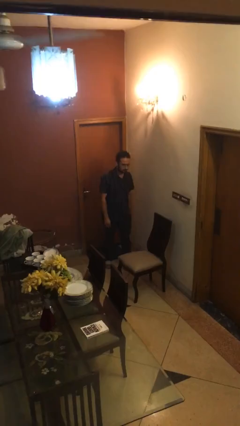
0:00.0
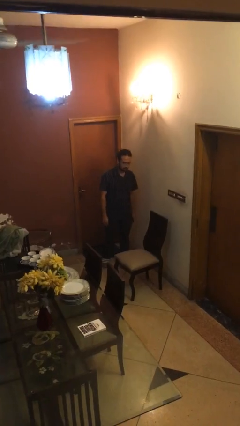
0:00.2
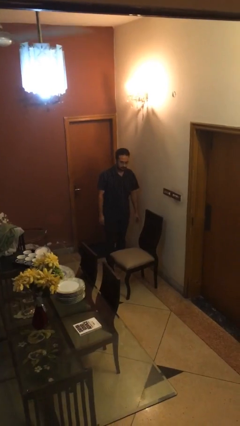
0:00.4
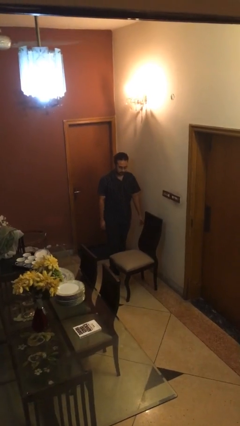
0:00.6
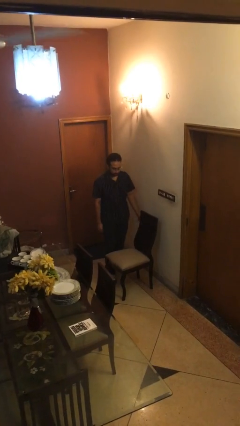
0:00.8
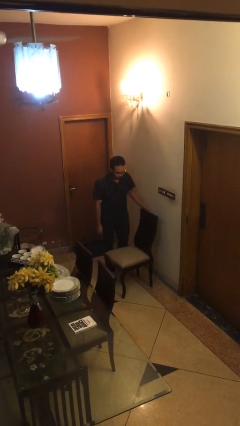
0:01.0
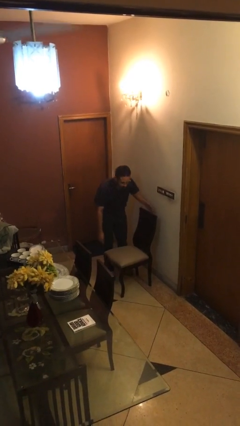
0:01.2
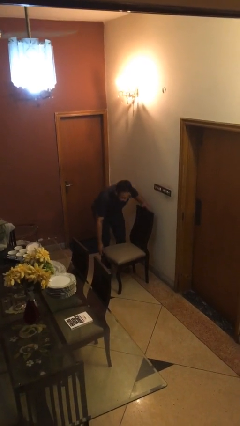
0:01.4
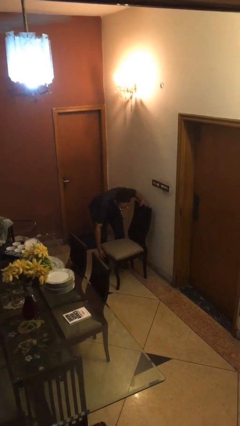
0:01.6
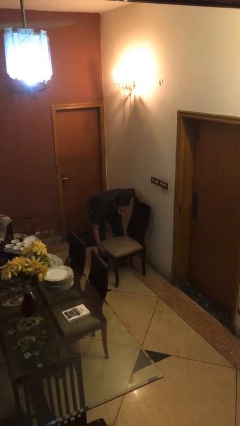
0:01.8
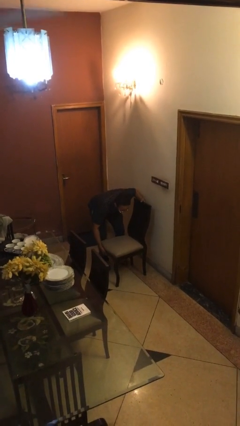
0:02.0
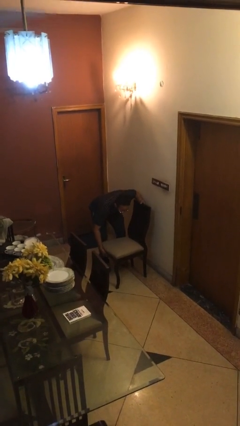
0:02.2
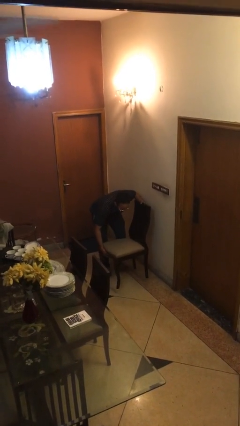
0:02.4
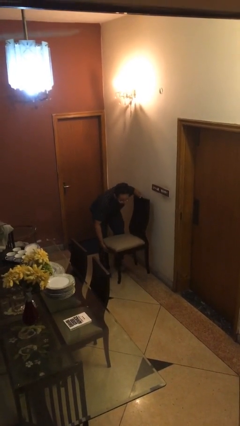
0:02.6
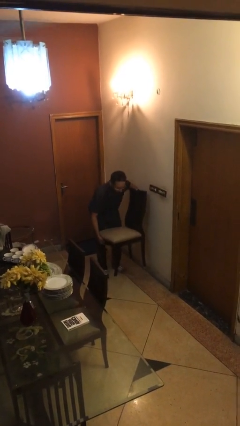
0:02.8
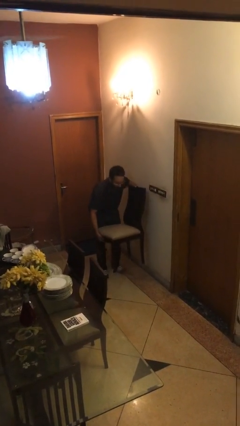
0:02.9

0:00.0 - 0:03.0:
person picks up object from floor

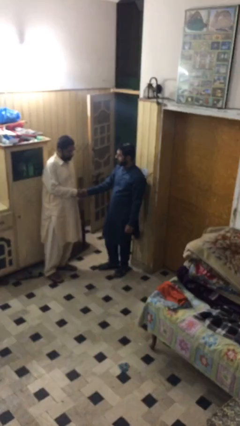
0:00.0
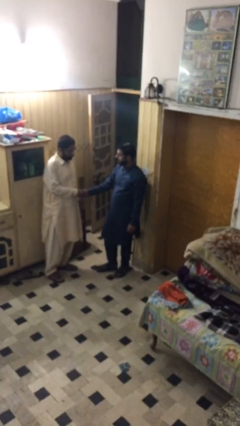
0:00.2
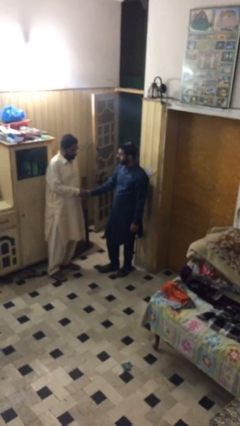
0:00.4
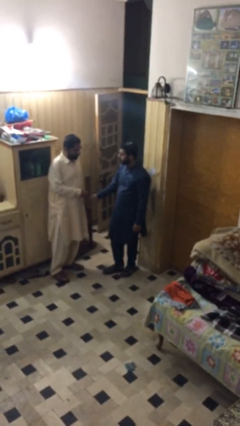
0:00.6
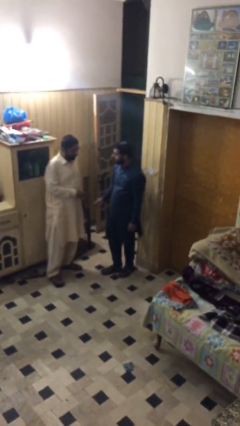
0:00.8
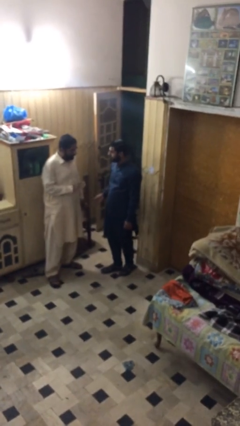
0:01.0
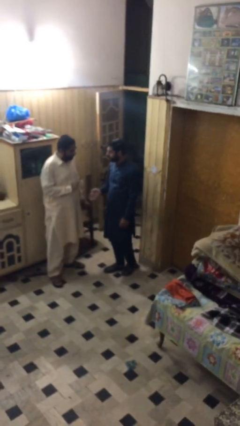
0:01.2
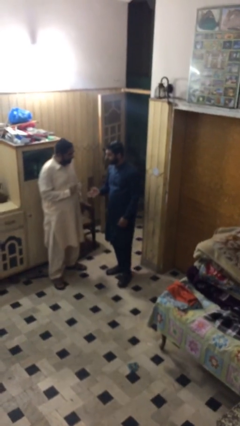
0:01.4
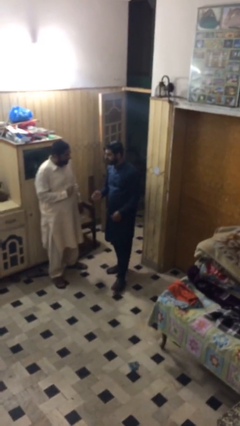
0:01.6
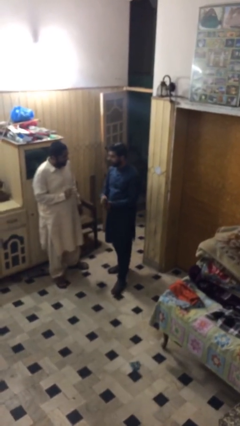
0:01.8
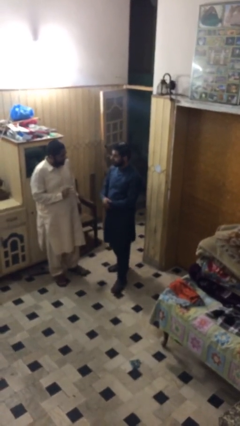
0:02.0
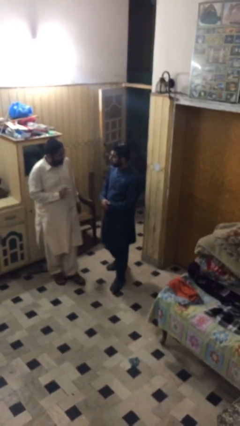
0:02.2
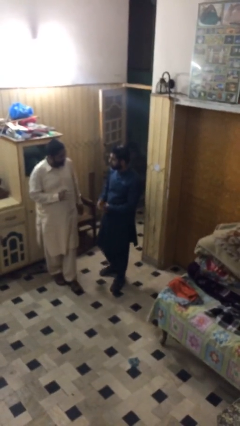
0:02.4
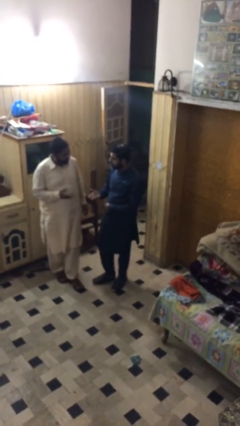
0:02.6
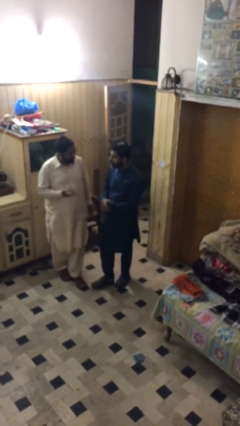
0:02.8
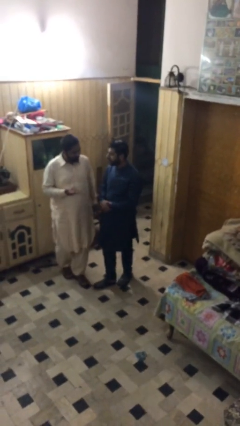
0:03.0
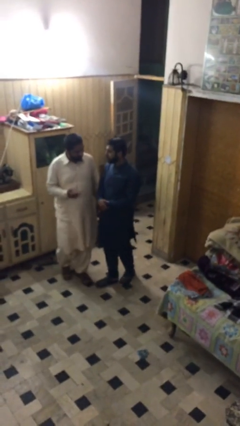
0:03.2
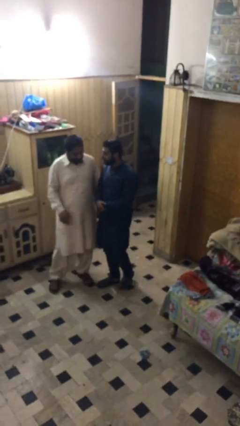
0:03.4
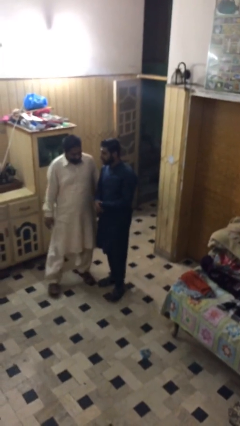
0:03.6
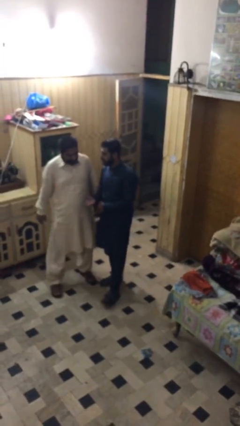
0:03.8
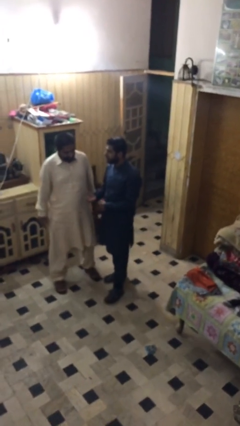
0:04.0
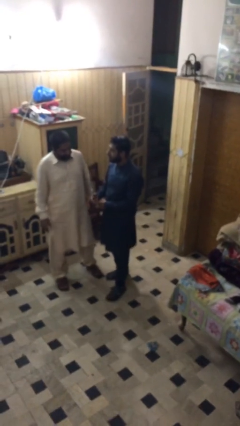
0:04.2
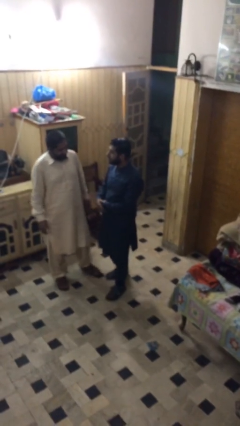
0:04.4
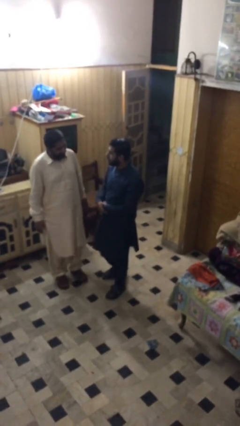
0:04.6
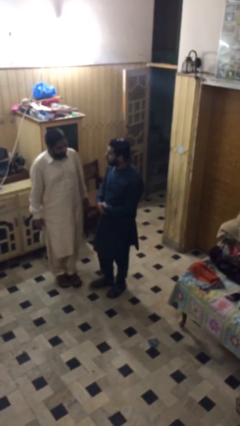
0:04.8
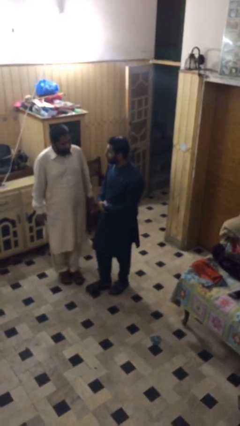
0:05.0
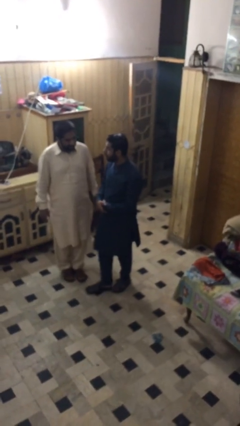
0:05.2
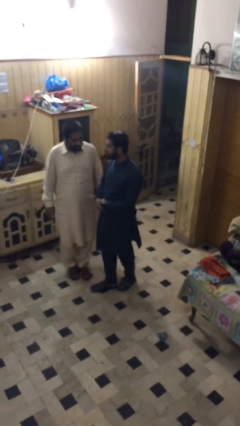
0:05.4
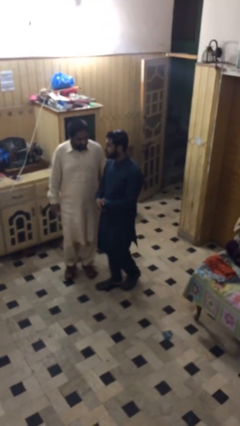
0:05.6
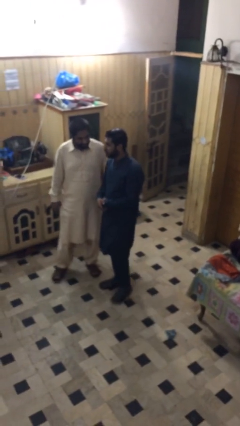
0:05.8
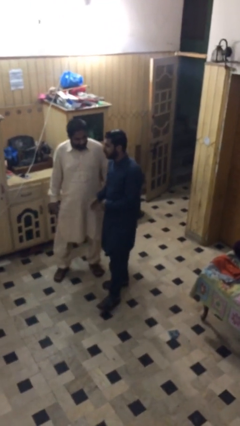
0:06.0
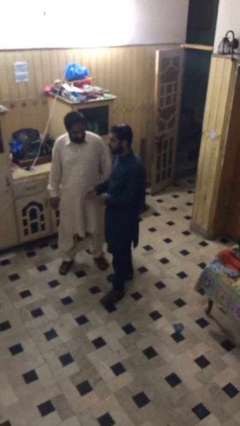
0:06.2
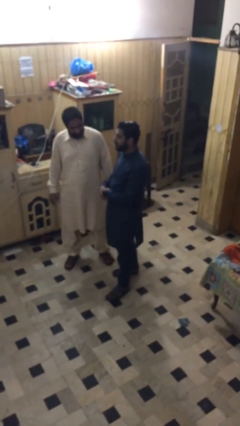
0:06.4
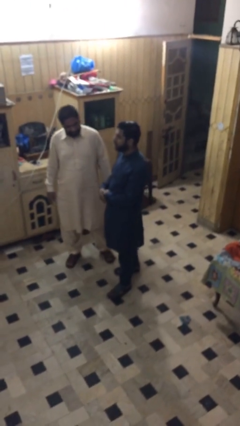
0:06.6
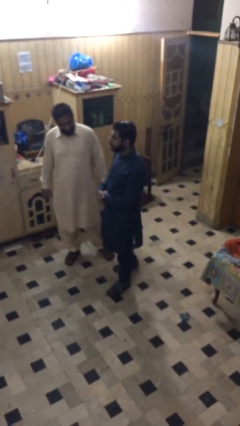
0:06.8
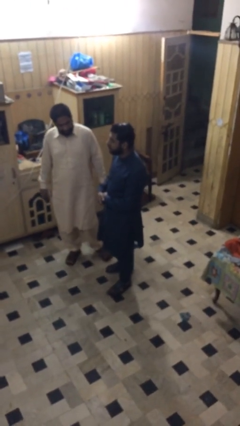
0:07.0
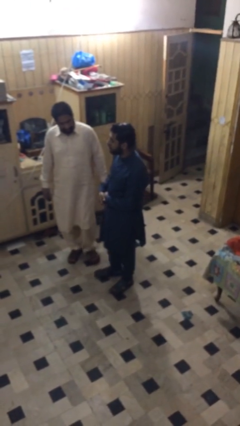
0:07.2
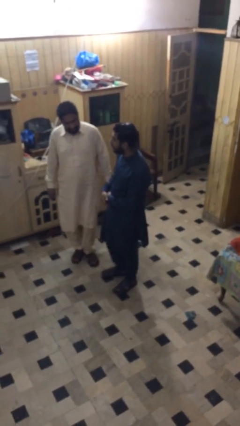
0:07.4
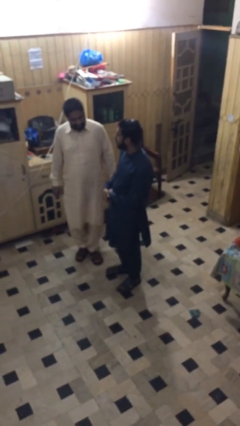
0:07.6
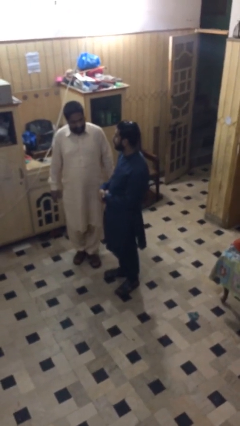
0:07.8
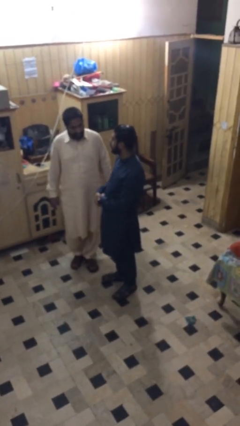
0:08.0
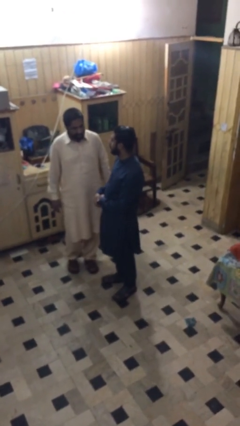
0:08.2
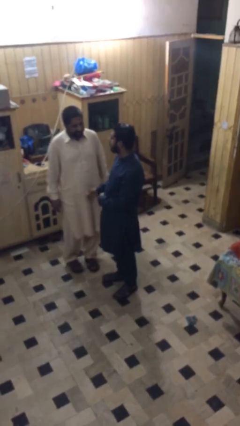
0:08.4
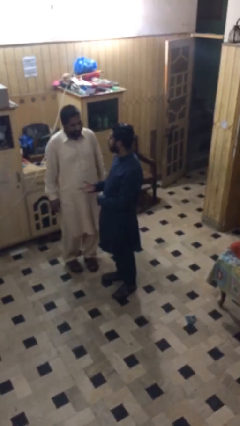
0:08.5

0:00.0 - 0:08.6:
person talks to person

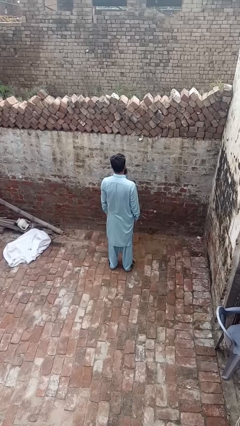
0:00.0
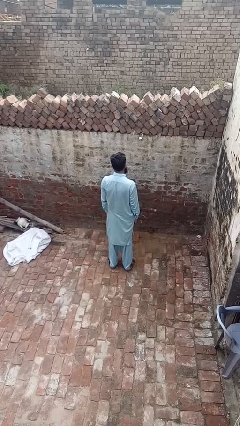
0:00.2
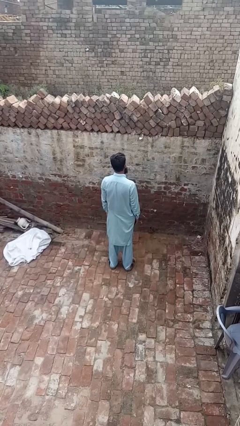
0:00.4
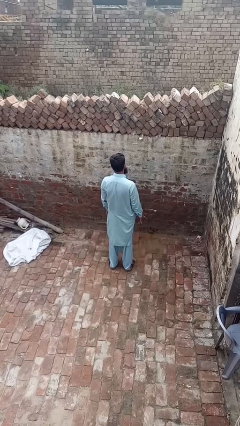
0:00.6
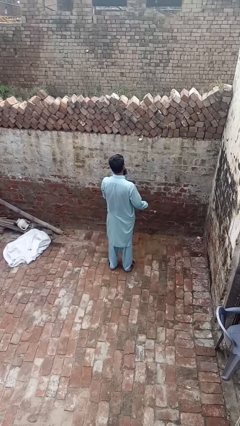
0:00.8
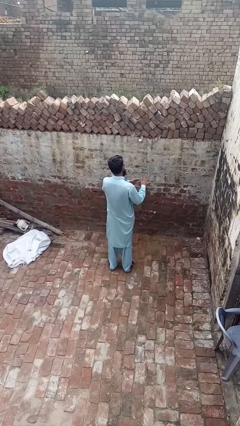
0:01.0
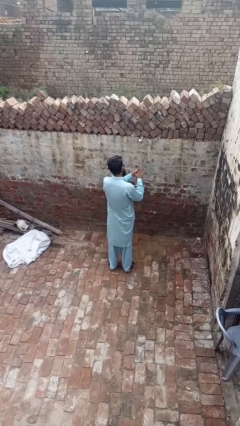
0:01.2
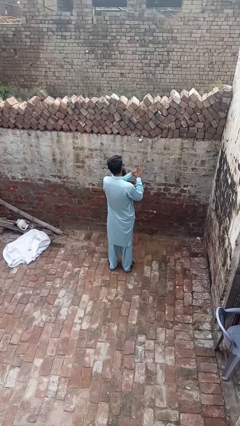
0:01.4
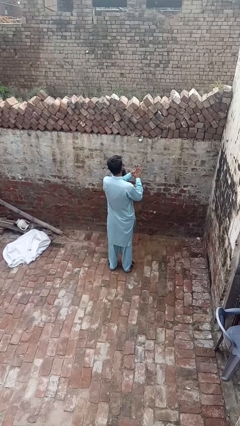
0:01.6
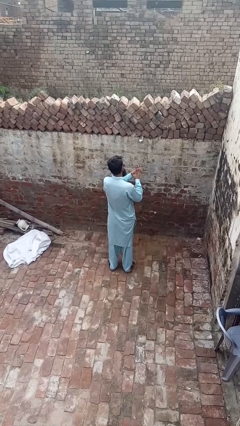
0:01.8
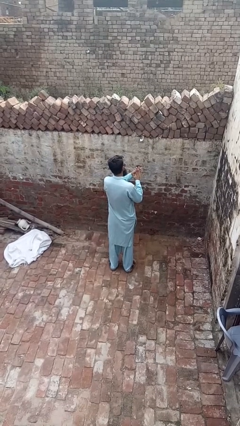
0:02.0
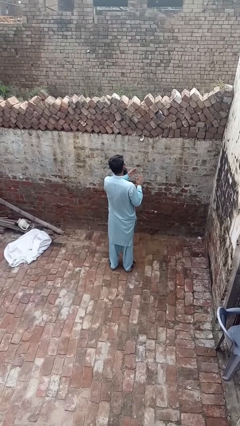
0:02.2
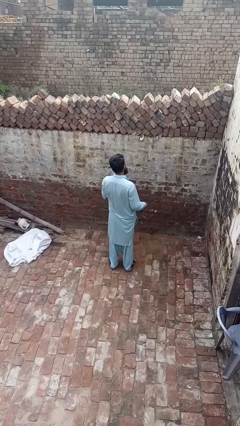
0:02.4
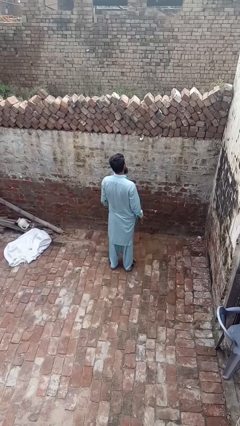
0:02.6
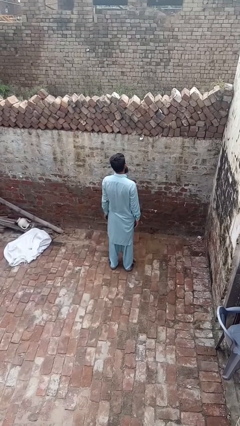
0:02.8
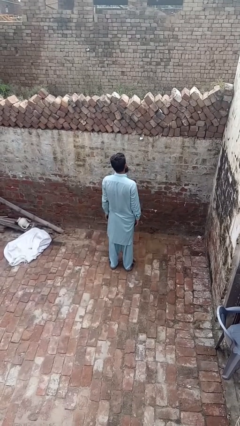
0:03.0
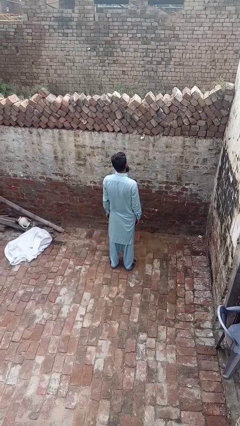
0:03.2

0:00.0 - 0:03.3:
person takes off ring

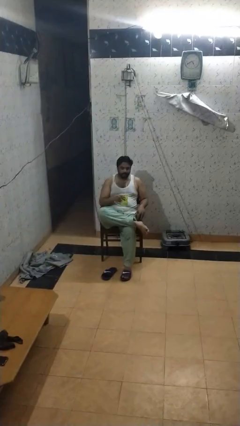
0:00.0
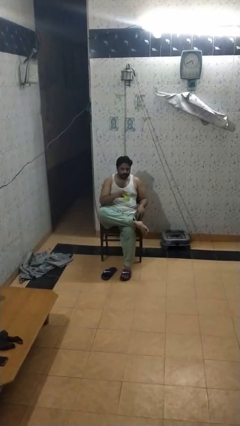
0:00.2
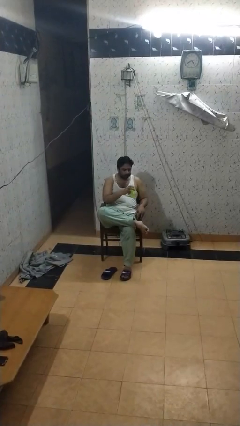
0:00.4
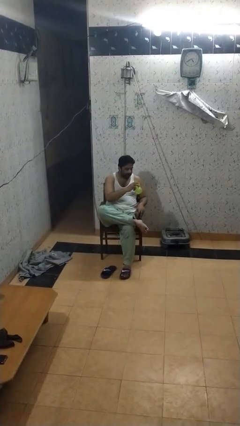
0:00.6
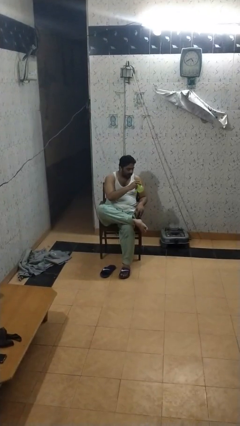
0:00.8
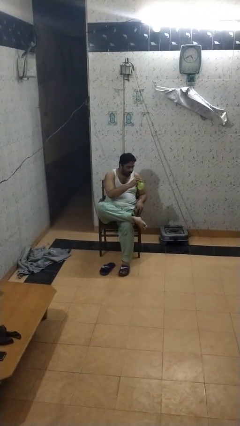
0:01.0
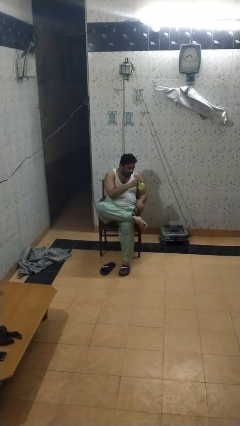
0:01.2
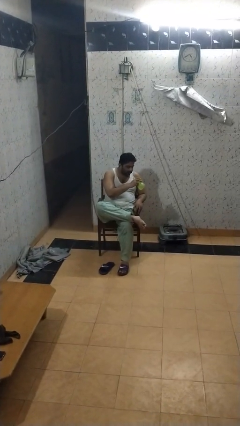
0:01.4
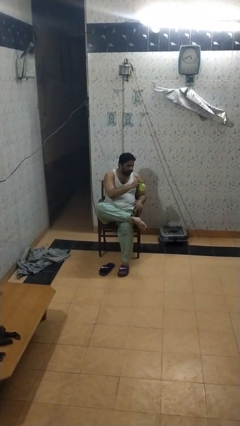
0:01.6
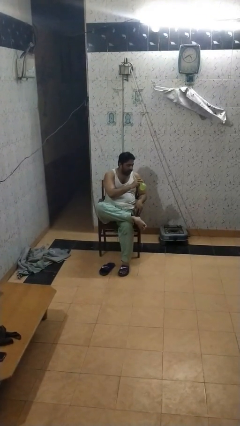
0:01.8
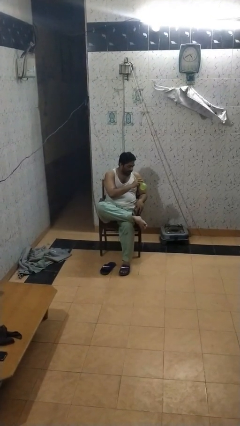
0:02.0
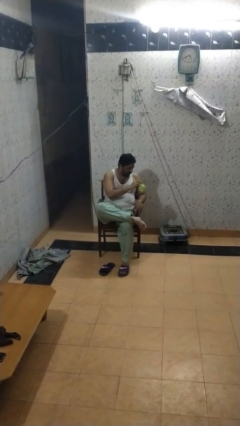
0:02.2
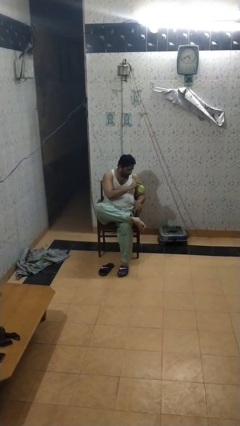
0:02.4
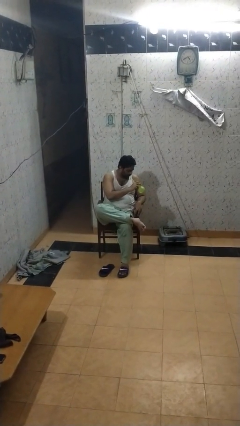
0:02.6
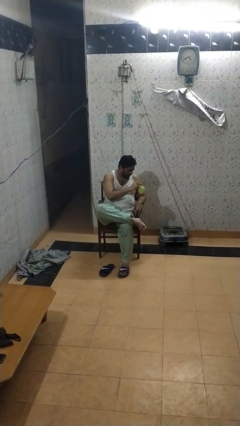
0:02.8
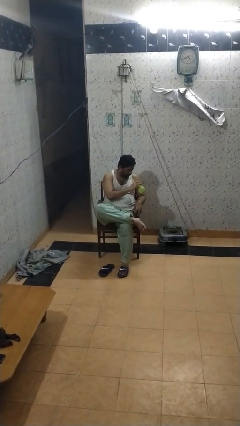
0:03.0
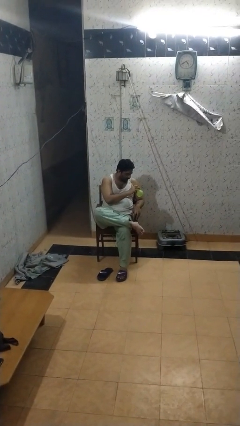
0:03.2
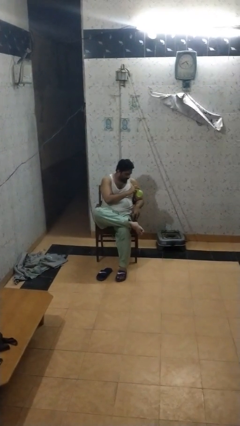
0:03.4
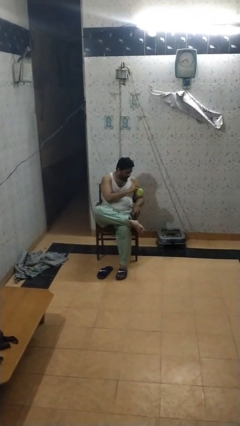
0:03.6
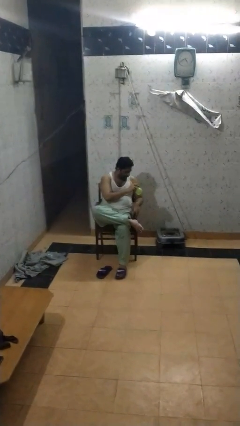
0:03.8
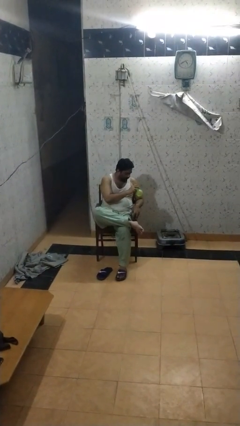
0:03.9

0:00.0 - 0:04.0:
person drinks from straw
